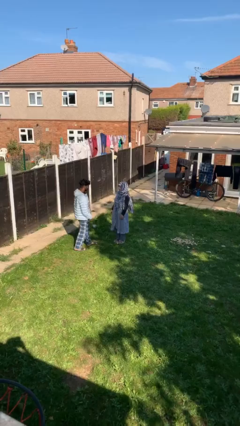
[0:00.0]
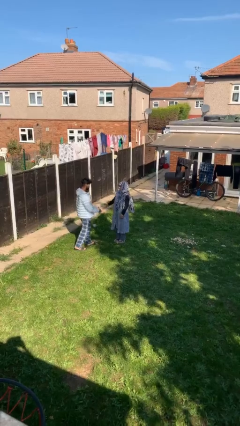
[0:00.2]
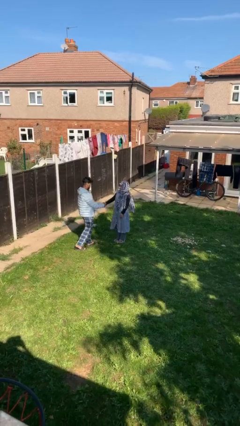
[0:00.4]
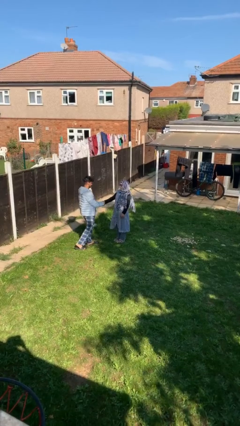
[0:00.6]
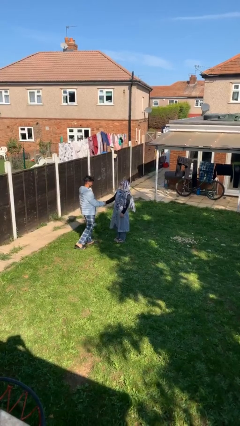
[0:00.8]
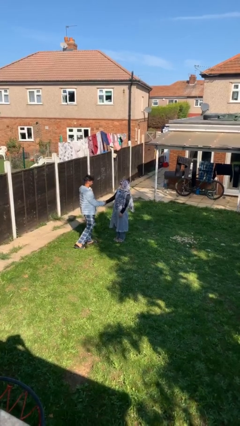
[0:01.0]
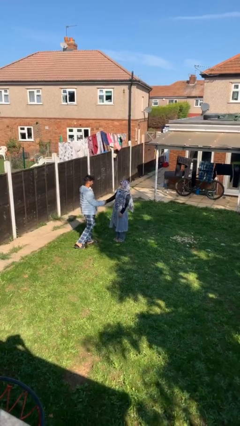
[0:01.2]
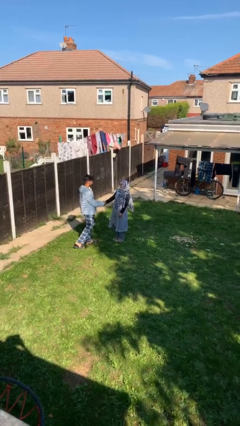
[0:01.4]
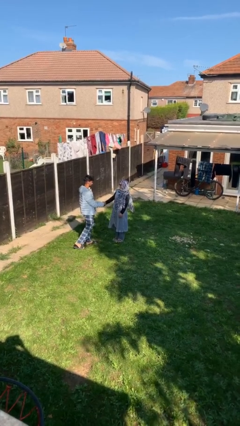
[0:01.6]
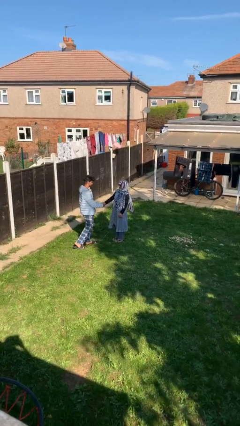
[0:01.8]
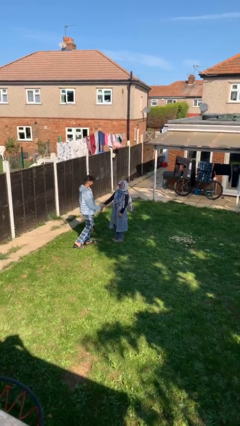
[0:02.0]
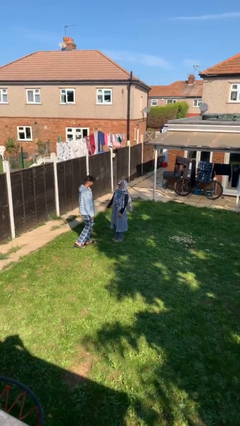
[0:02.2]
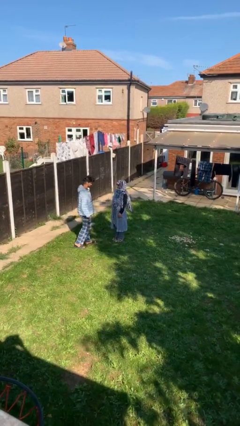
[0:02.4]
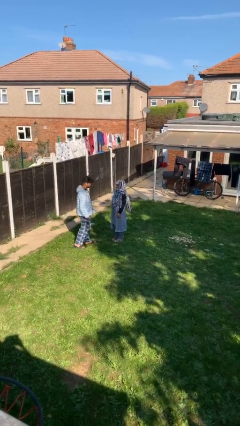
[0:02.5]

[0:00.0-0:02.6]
person shakes hand

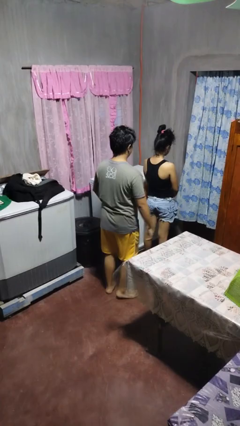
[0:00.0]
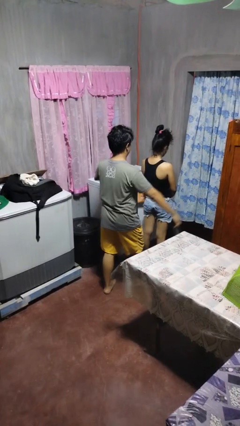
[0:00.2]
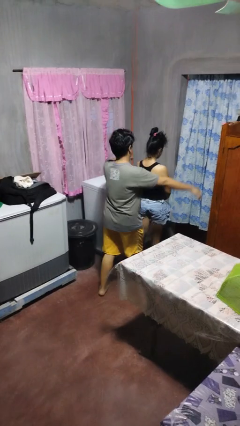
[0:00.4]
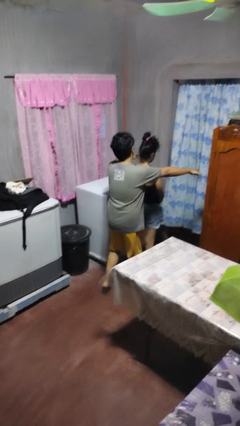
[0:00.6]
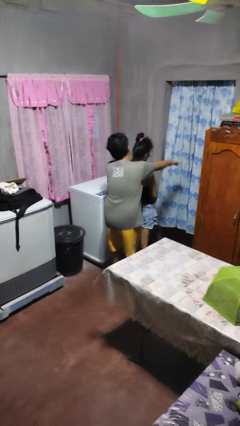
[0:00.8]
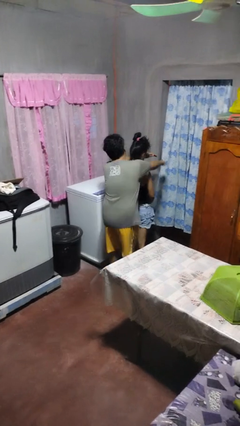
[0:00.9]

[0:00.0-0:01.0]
person hugs person from behind

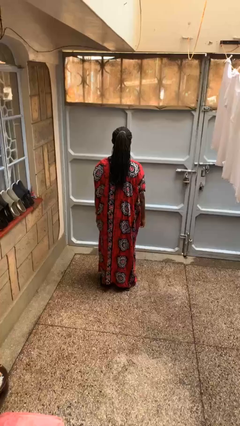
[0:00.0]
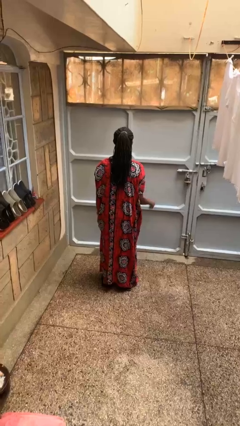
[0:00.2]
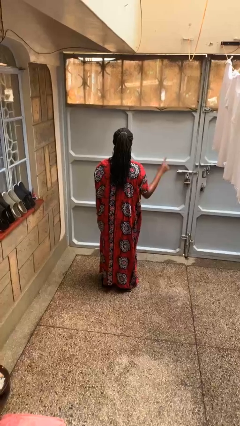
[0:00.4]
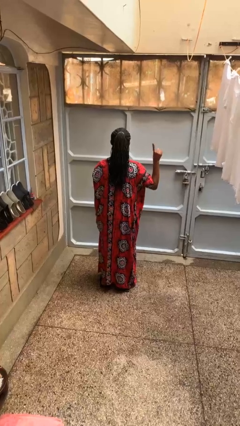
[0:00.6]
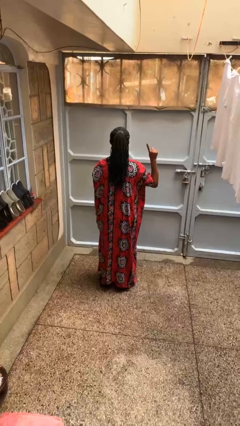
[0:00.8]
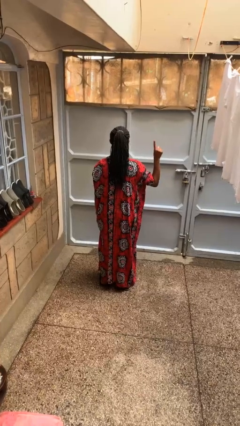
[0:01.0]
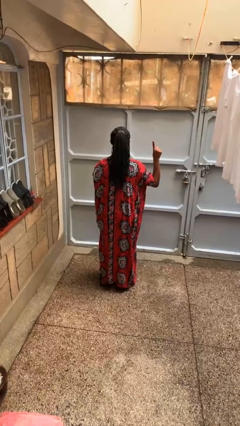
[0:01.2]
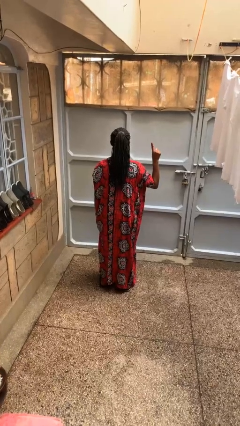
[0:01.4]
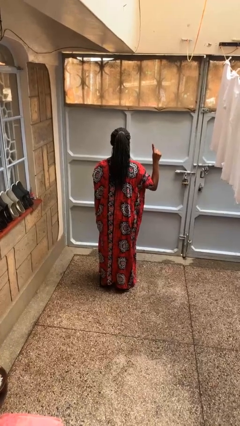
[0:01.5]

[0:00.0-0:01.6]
person gestures number one

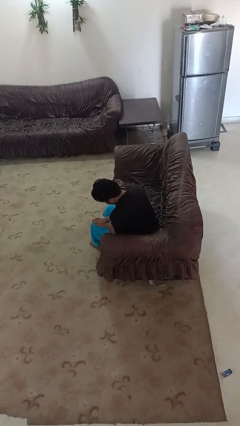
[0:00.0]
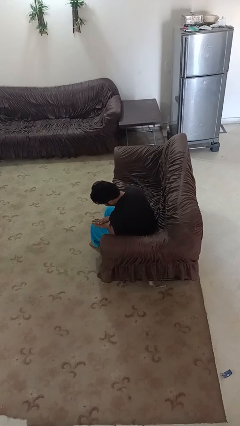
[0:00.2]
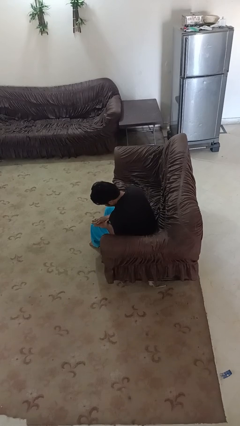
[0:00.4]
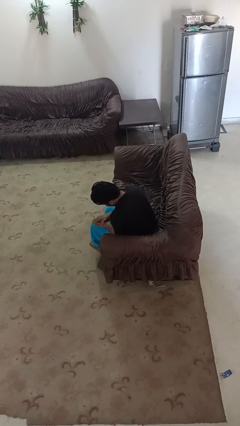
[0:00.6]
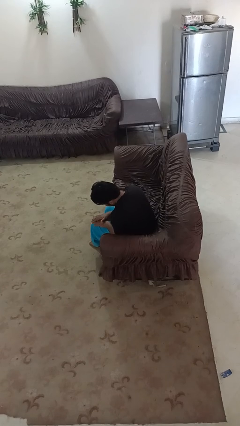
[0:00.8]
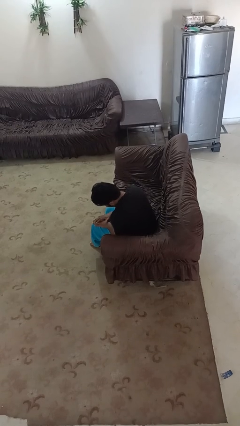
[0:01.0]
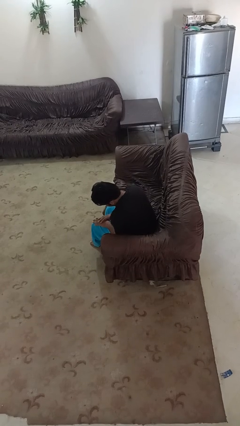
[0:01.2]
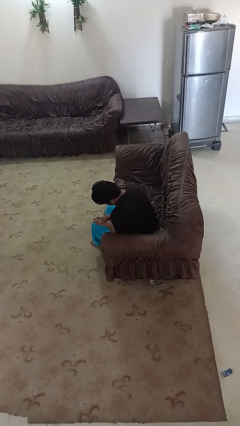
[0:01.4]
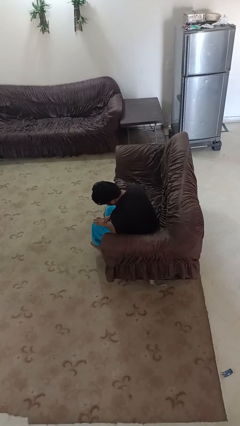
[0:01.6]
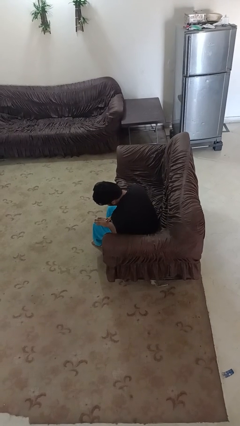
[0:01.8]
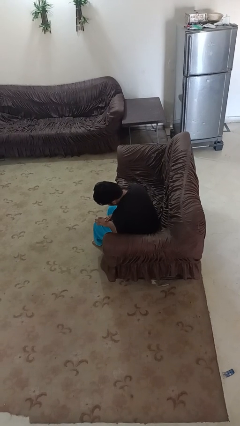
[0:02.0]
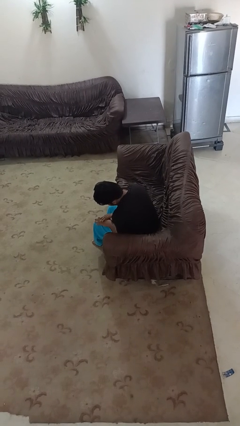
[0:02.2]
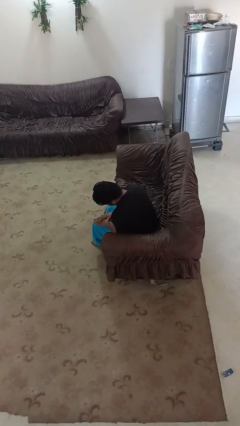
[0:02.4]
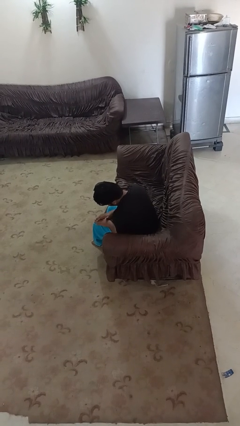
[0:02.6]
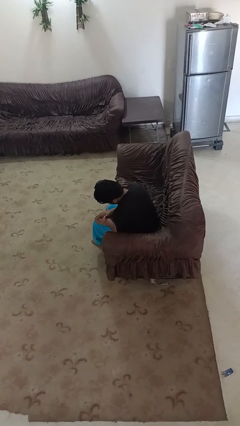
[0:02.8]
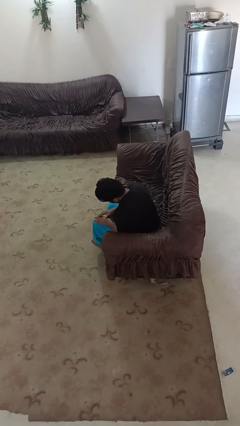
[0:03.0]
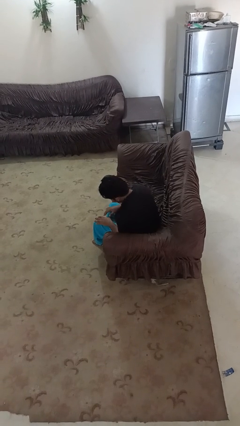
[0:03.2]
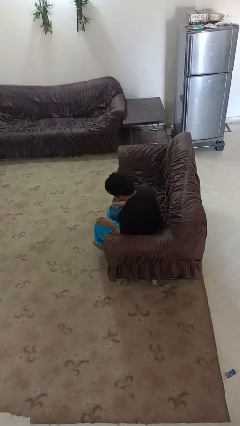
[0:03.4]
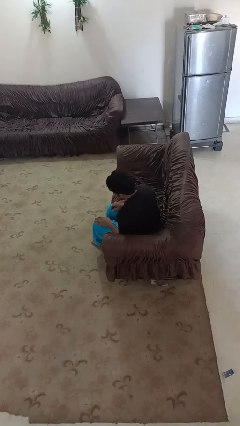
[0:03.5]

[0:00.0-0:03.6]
person looks at hands in lap

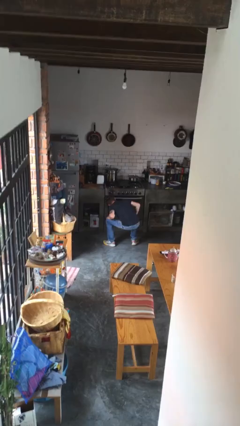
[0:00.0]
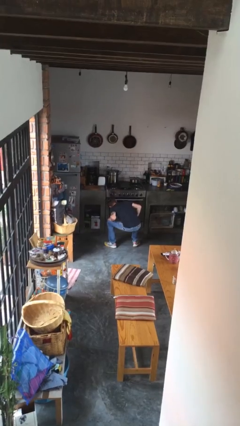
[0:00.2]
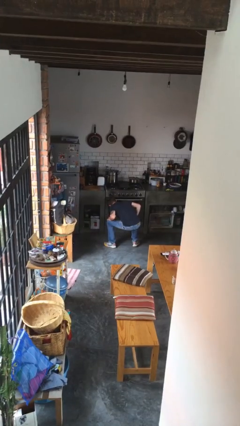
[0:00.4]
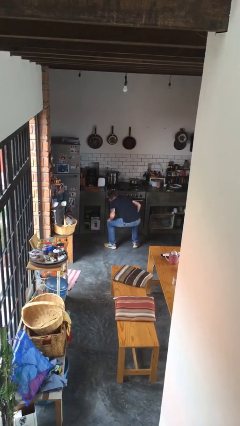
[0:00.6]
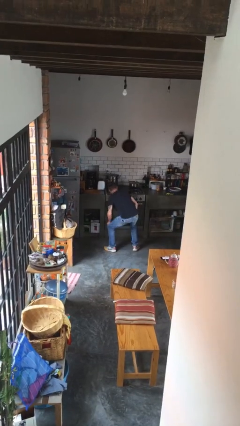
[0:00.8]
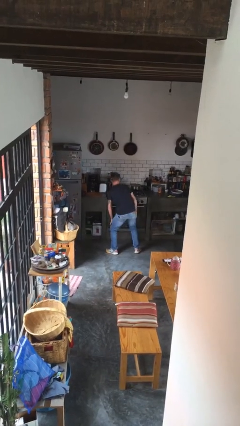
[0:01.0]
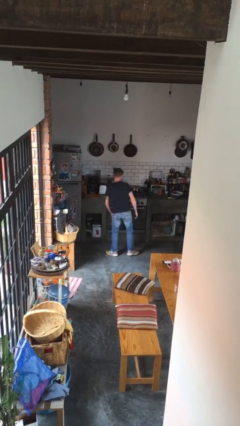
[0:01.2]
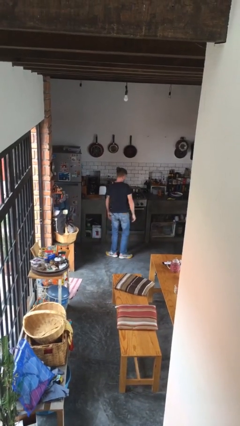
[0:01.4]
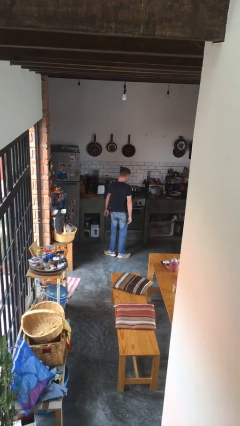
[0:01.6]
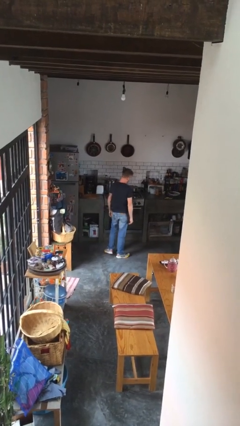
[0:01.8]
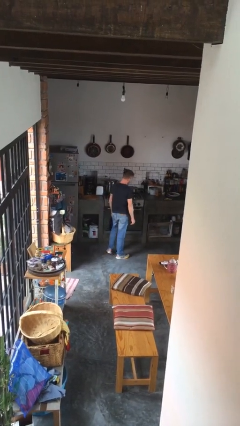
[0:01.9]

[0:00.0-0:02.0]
person stands up

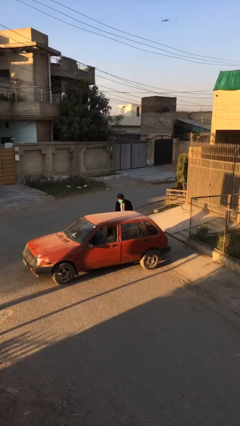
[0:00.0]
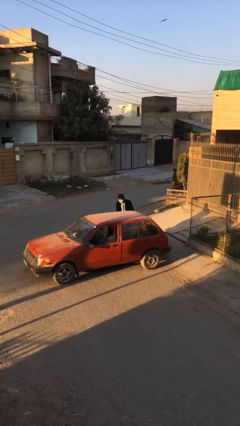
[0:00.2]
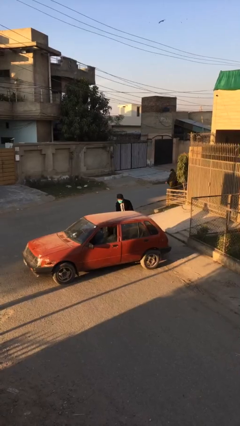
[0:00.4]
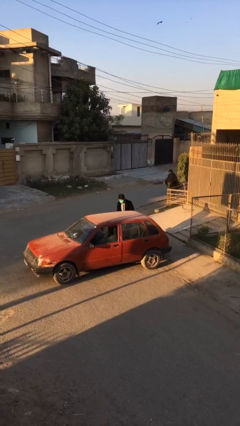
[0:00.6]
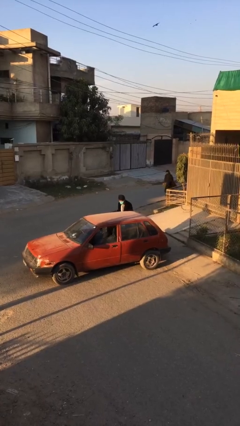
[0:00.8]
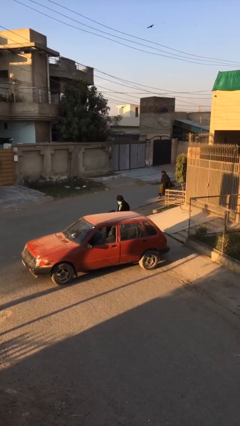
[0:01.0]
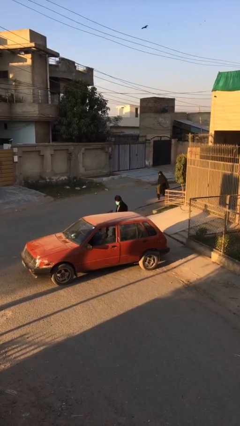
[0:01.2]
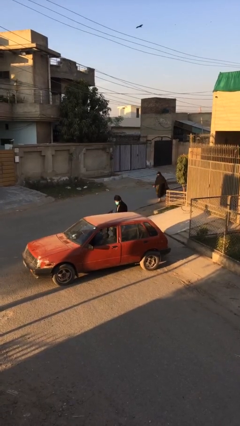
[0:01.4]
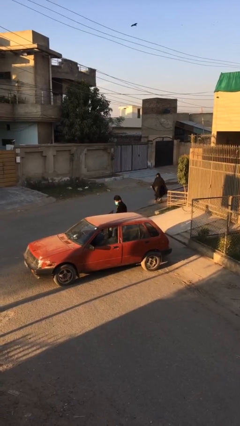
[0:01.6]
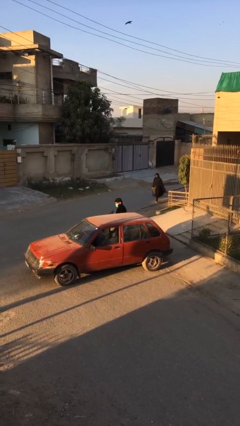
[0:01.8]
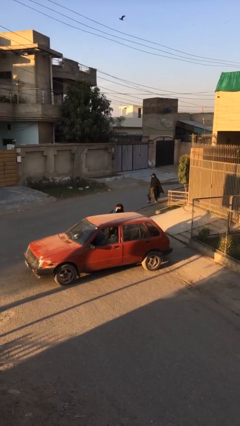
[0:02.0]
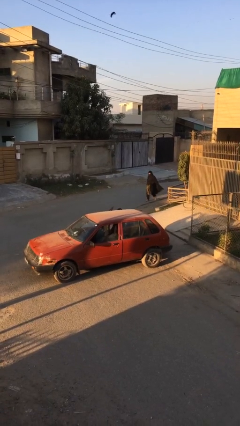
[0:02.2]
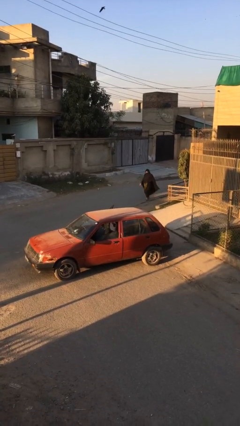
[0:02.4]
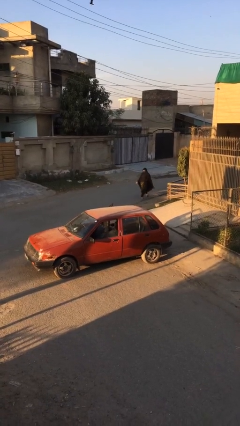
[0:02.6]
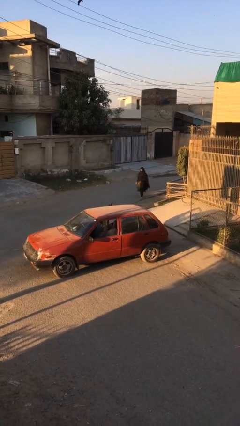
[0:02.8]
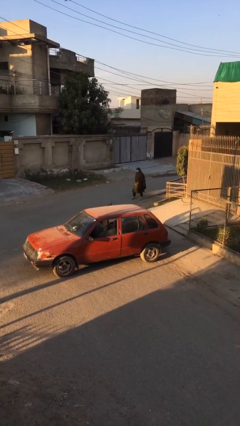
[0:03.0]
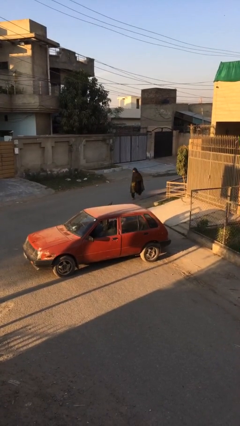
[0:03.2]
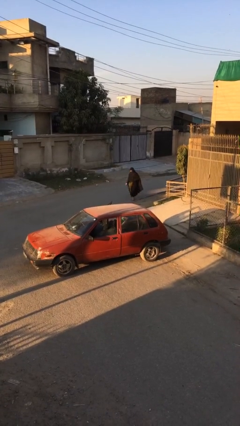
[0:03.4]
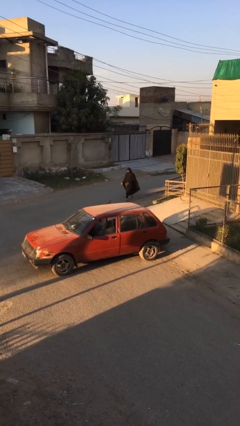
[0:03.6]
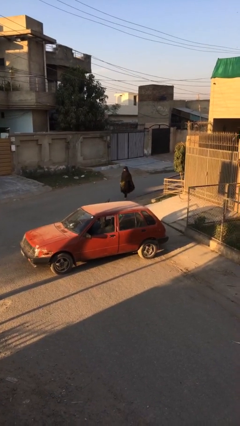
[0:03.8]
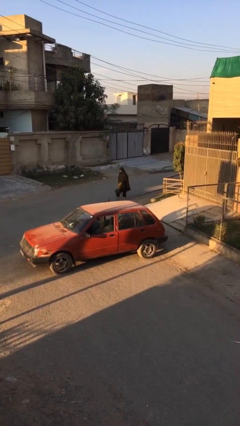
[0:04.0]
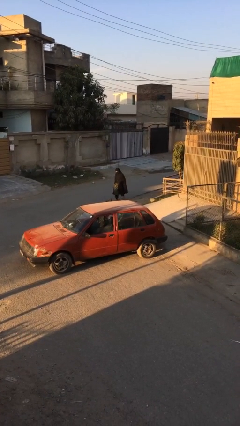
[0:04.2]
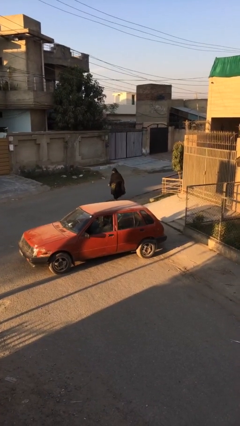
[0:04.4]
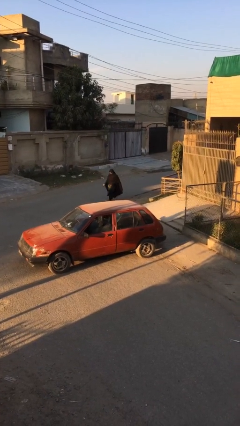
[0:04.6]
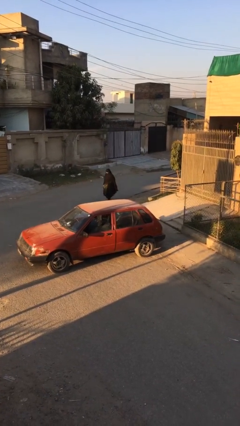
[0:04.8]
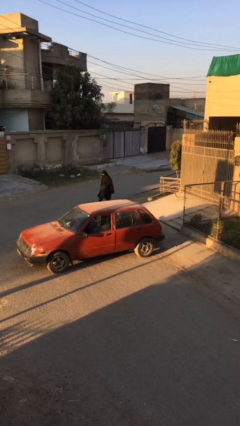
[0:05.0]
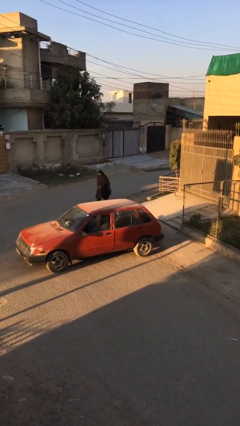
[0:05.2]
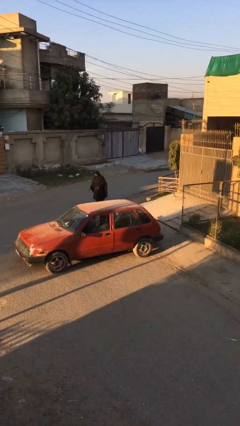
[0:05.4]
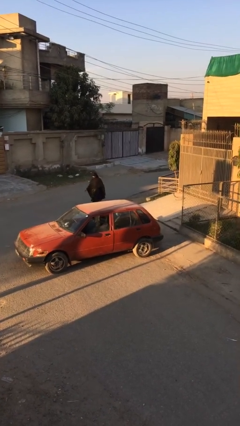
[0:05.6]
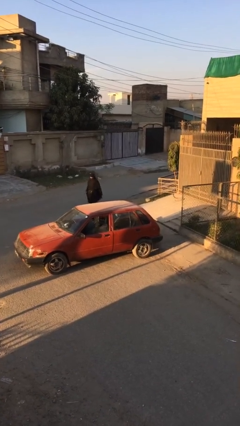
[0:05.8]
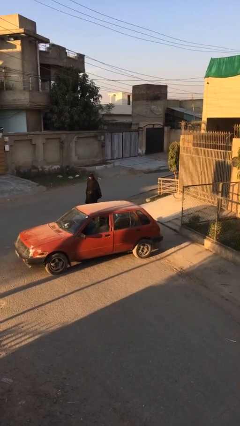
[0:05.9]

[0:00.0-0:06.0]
person enters car

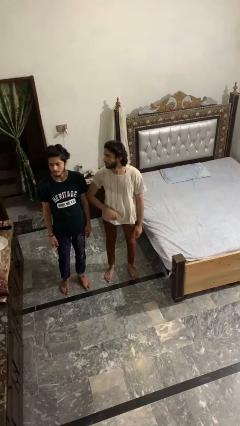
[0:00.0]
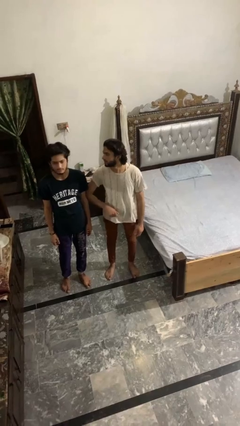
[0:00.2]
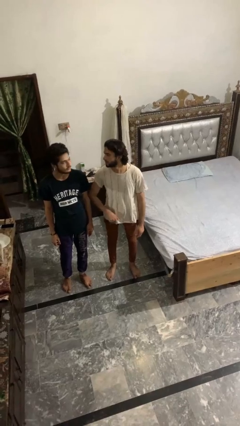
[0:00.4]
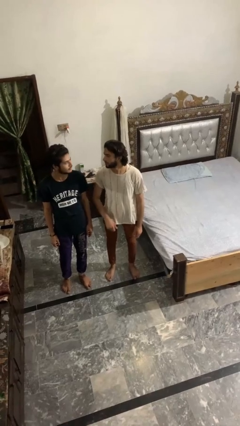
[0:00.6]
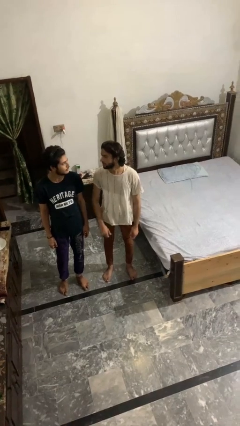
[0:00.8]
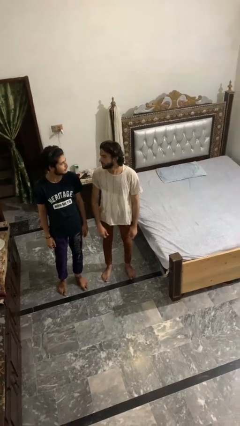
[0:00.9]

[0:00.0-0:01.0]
person nudges person with elbow
